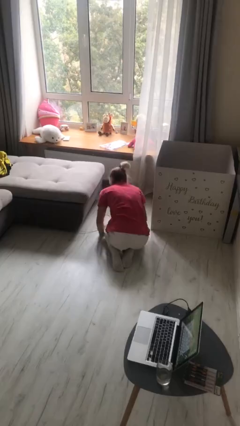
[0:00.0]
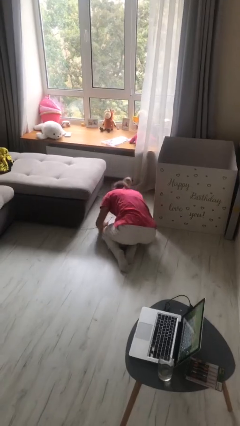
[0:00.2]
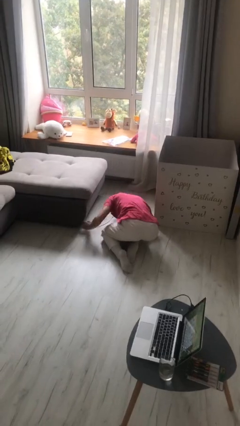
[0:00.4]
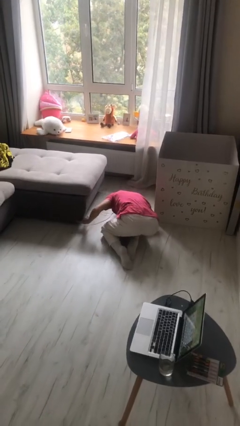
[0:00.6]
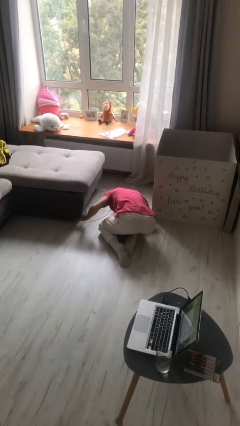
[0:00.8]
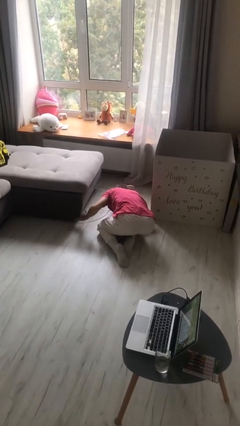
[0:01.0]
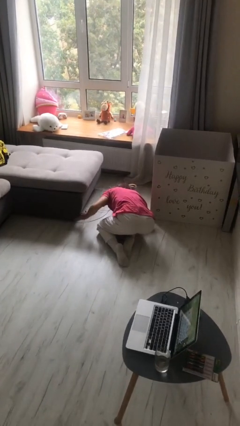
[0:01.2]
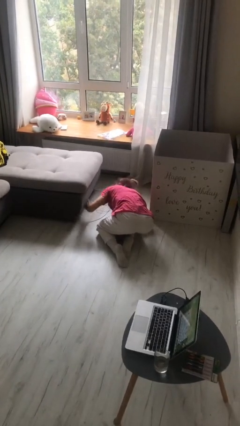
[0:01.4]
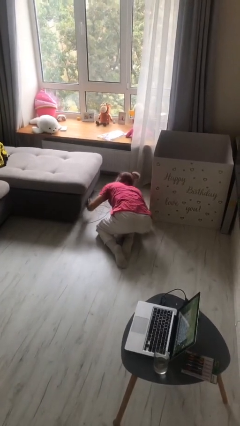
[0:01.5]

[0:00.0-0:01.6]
person searches under couch

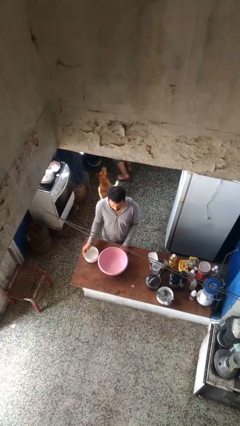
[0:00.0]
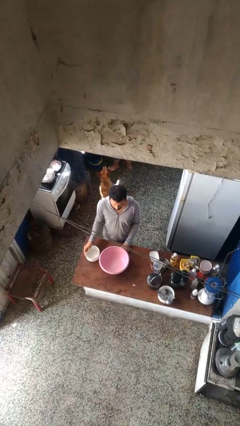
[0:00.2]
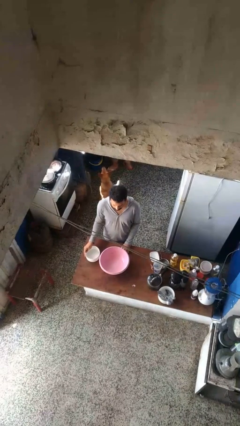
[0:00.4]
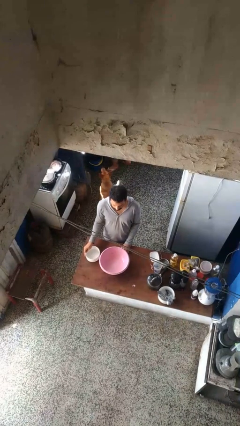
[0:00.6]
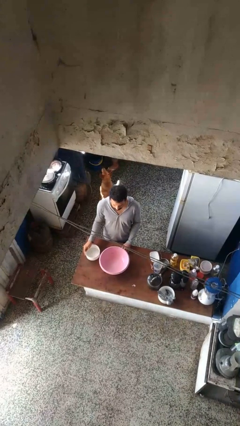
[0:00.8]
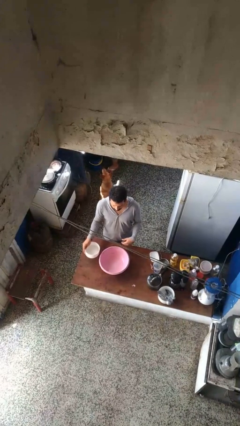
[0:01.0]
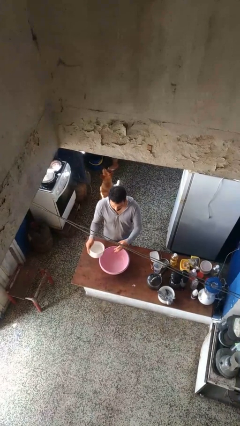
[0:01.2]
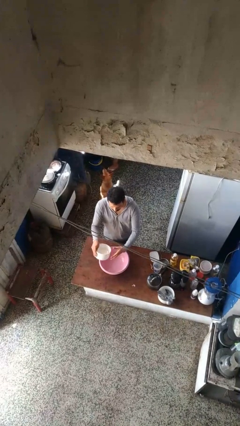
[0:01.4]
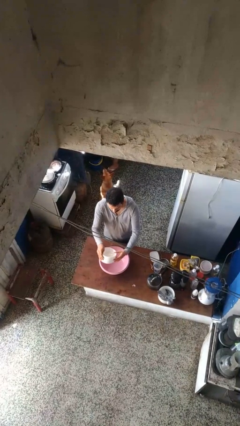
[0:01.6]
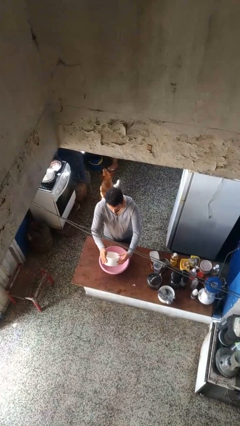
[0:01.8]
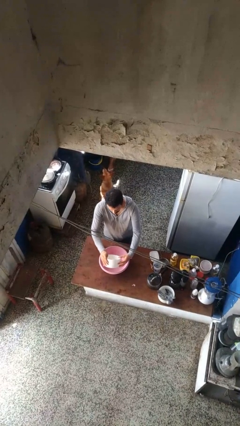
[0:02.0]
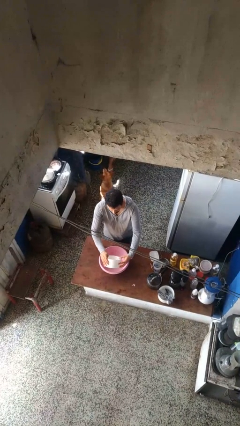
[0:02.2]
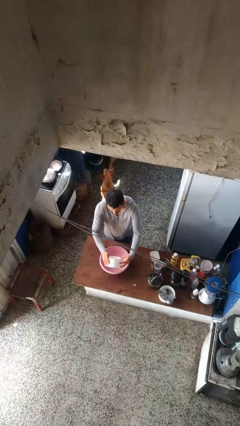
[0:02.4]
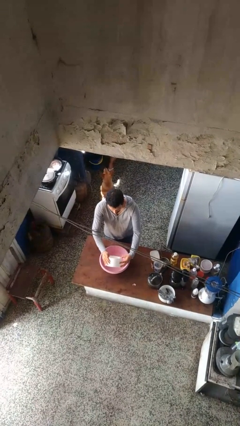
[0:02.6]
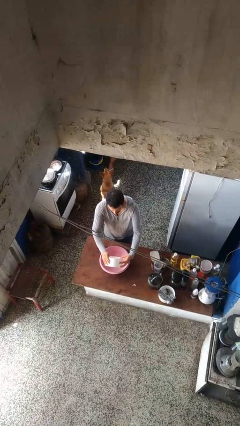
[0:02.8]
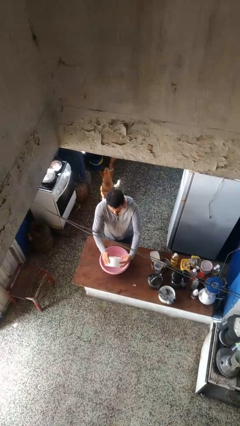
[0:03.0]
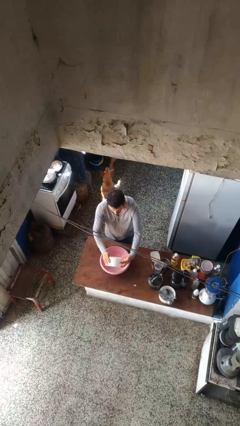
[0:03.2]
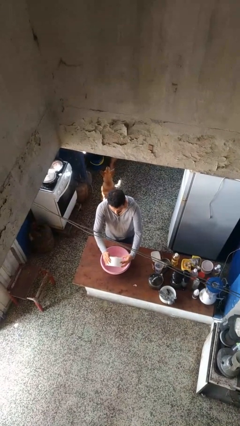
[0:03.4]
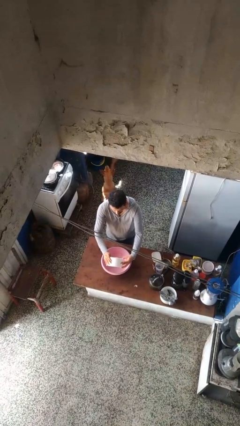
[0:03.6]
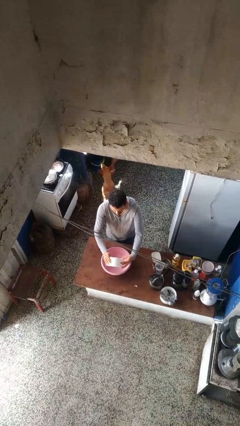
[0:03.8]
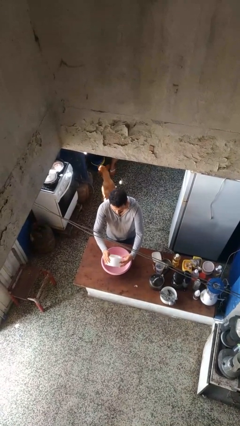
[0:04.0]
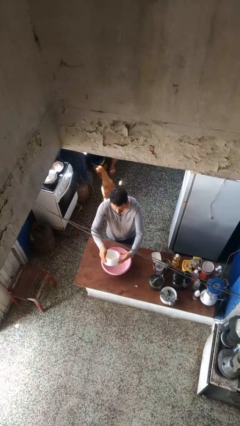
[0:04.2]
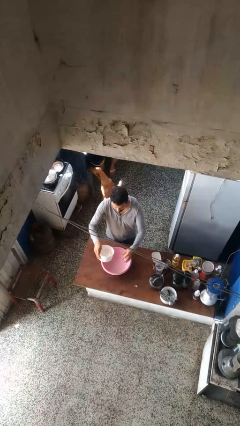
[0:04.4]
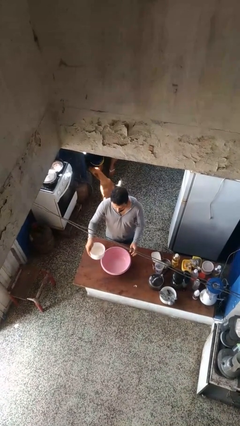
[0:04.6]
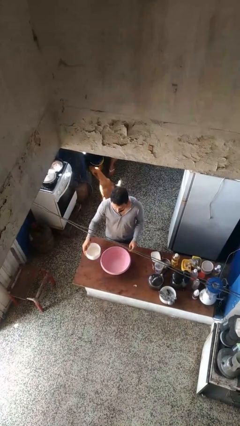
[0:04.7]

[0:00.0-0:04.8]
person pours into bowl

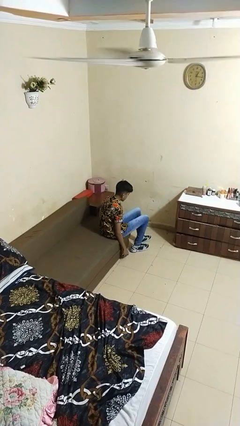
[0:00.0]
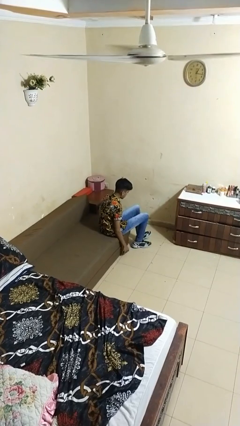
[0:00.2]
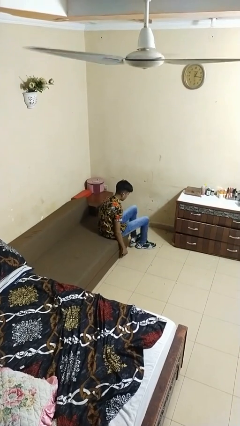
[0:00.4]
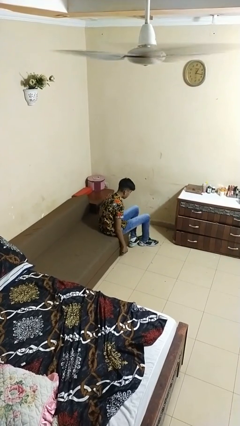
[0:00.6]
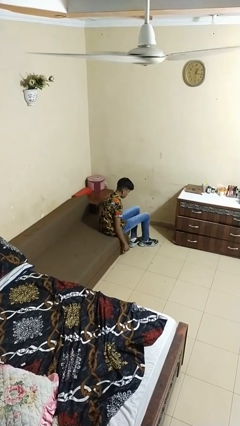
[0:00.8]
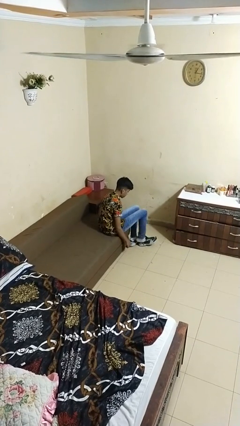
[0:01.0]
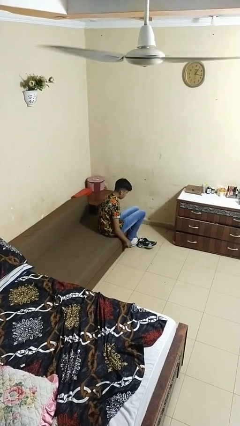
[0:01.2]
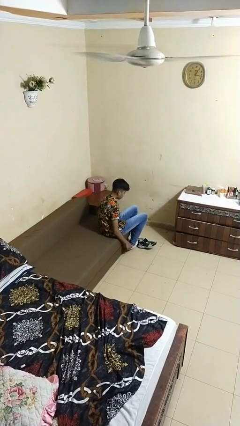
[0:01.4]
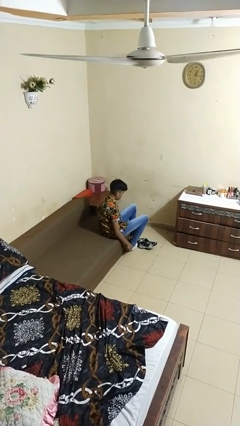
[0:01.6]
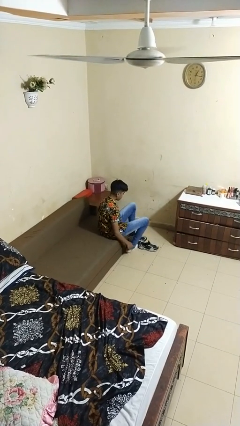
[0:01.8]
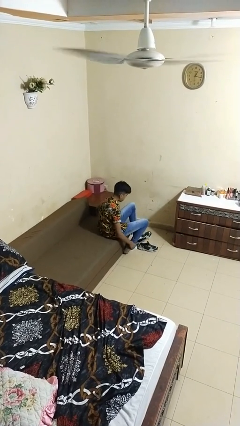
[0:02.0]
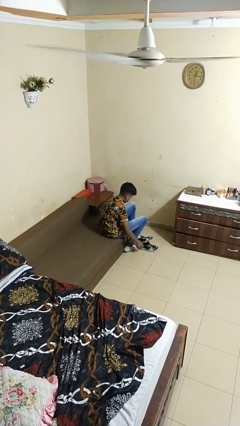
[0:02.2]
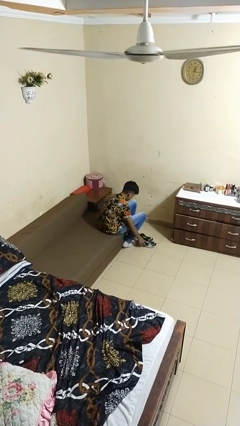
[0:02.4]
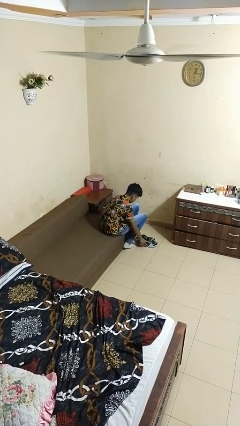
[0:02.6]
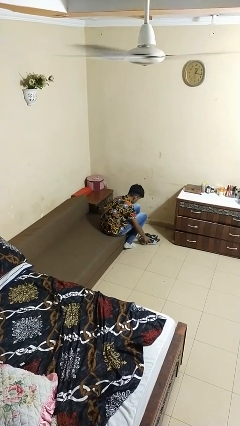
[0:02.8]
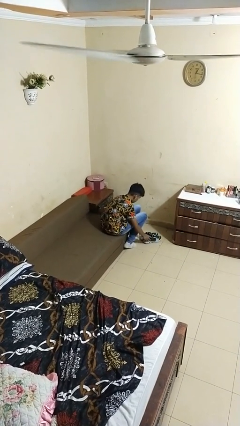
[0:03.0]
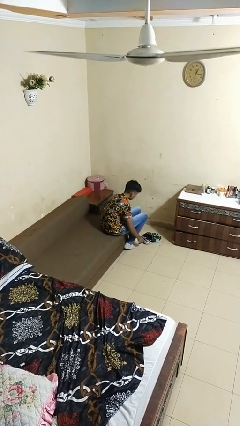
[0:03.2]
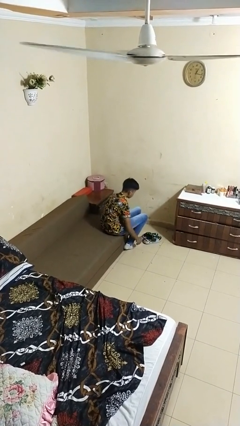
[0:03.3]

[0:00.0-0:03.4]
person takes off shoes

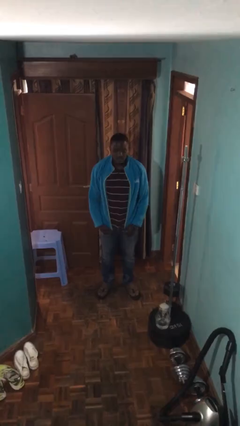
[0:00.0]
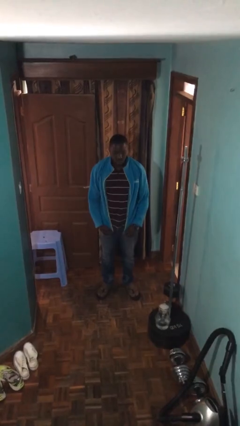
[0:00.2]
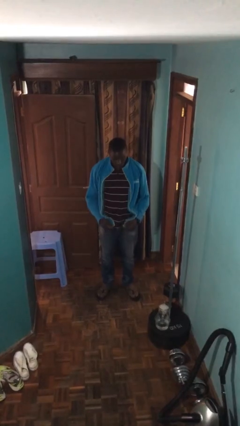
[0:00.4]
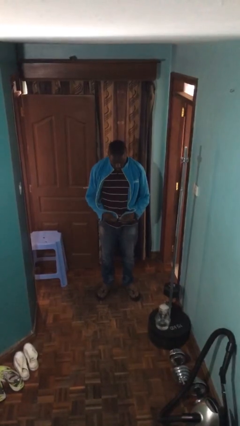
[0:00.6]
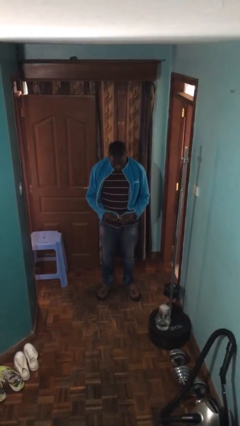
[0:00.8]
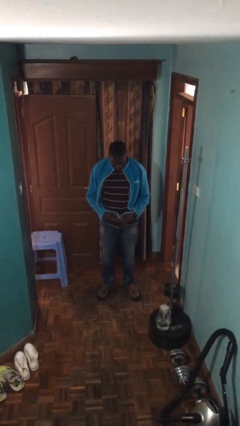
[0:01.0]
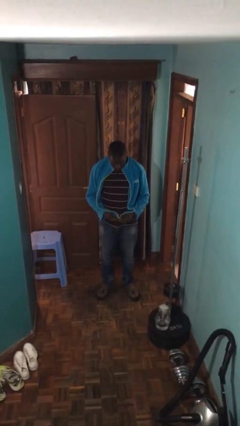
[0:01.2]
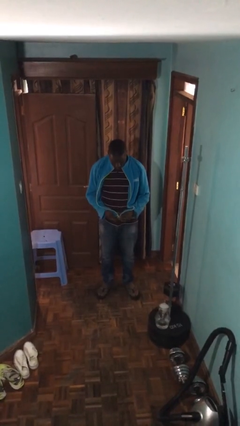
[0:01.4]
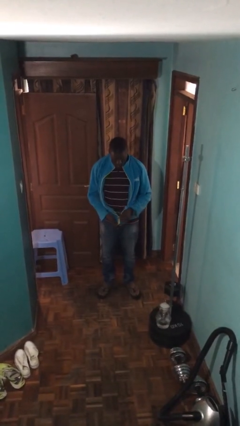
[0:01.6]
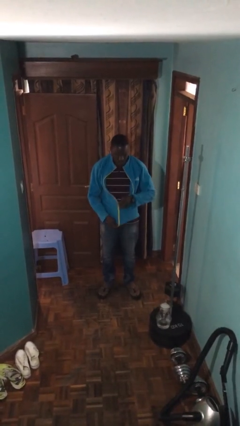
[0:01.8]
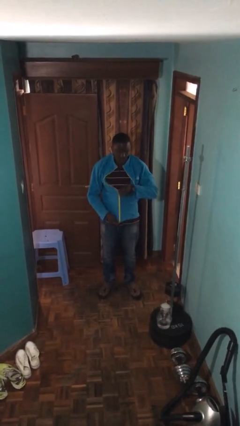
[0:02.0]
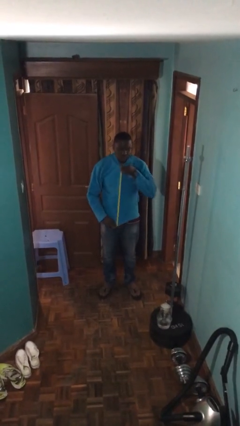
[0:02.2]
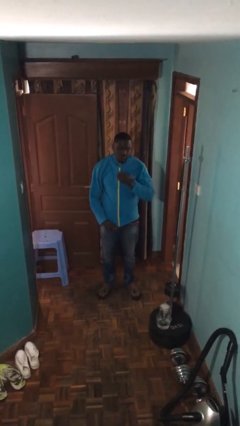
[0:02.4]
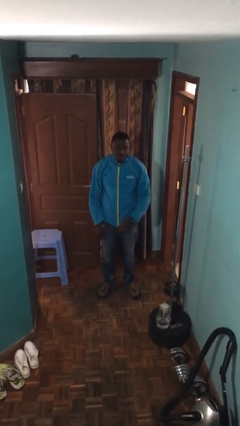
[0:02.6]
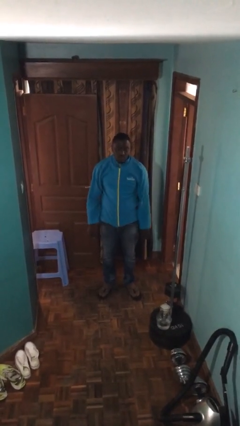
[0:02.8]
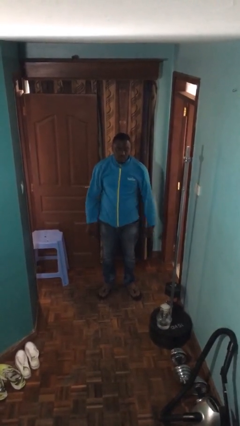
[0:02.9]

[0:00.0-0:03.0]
person zips up jacket

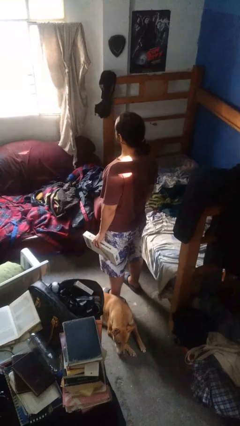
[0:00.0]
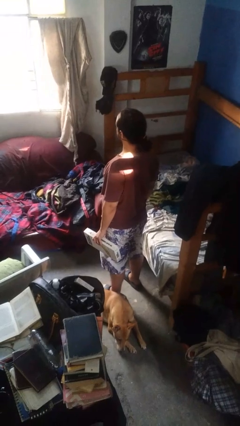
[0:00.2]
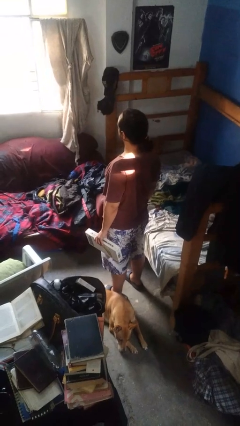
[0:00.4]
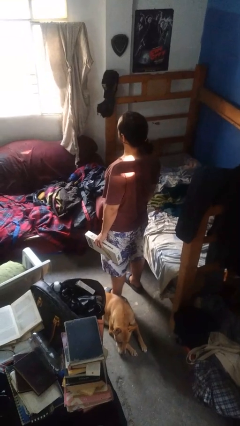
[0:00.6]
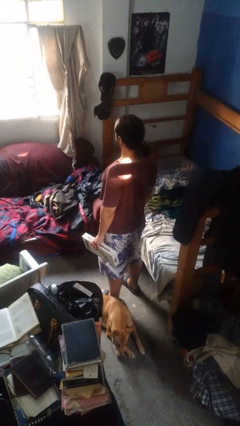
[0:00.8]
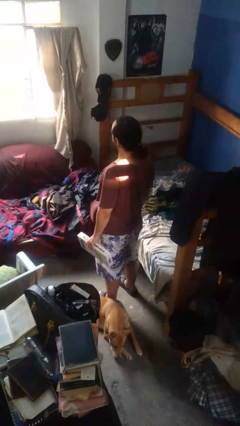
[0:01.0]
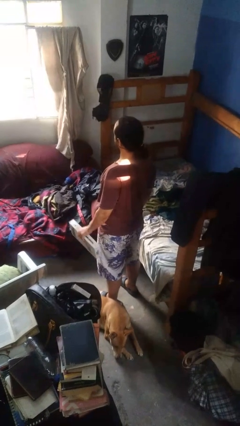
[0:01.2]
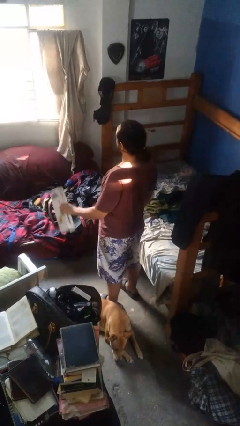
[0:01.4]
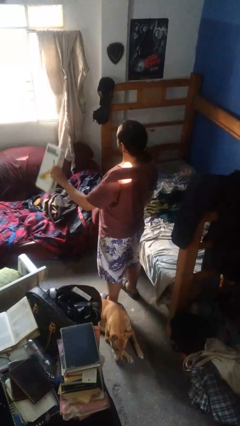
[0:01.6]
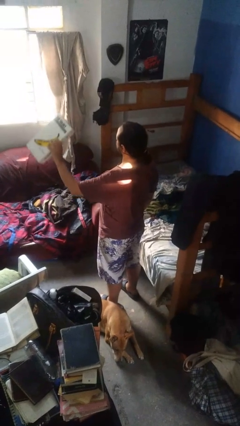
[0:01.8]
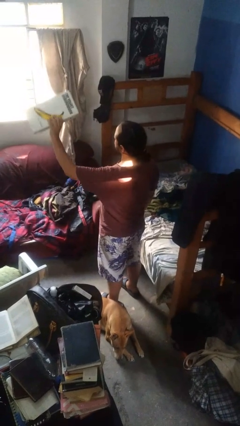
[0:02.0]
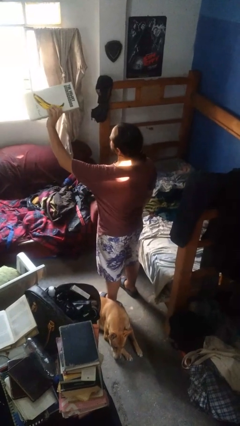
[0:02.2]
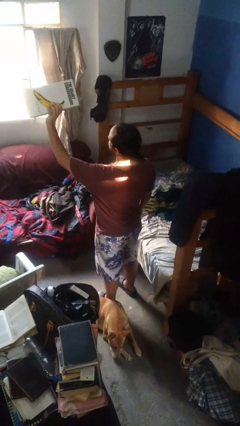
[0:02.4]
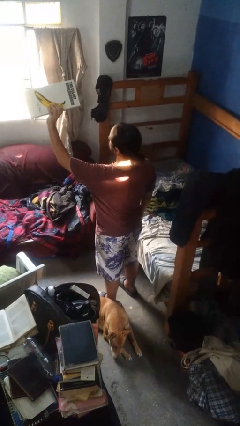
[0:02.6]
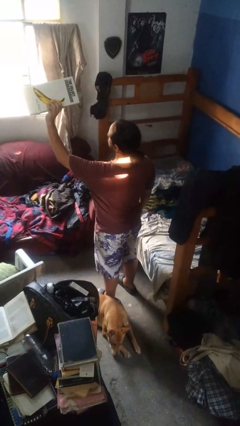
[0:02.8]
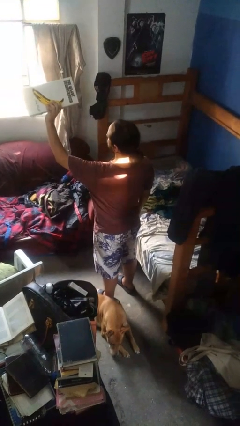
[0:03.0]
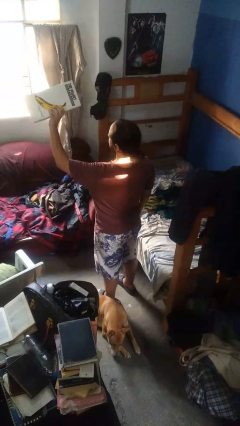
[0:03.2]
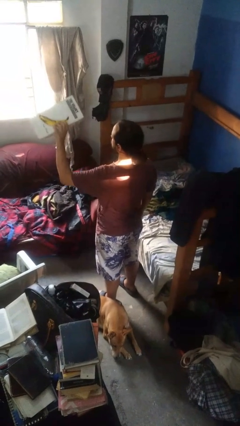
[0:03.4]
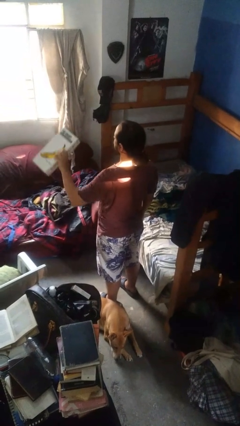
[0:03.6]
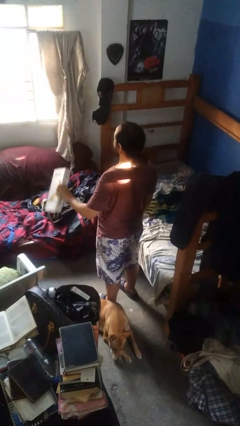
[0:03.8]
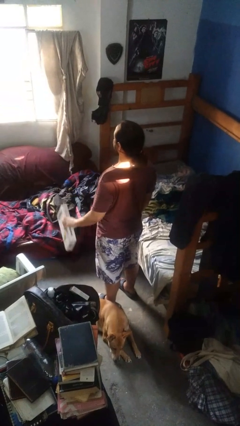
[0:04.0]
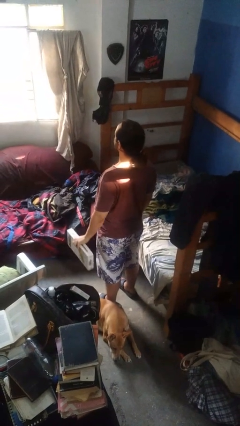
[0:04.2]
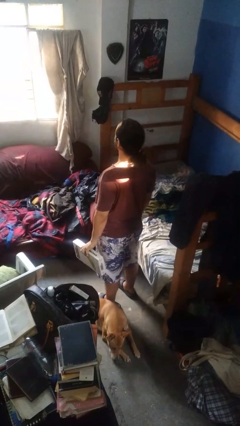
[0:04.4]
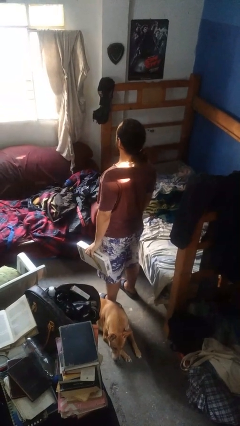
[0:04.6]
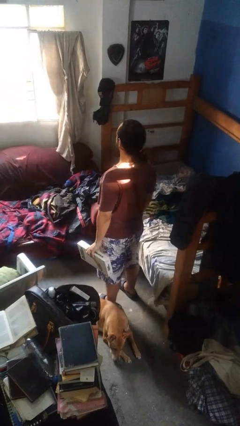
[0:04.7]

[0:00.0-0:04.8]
person holds object above head
